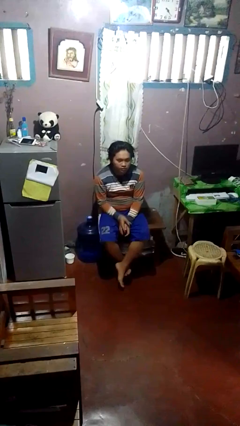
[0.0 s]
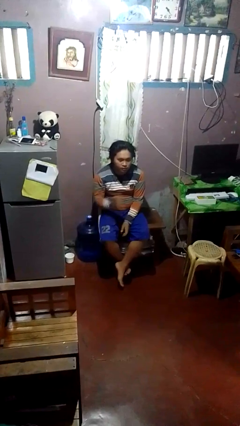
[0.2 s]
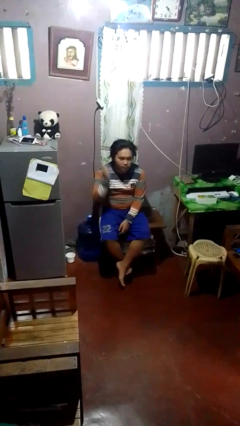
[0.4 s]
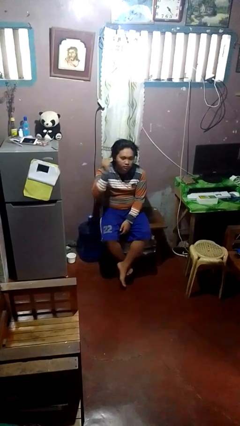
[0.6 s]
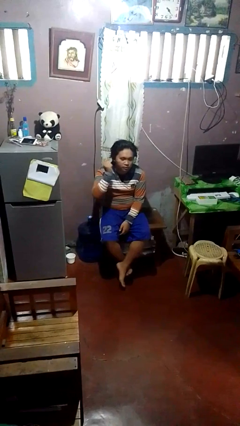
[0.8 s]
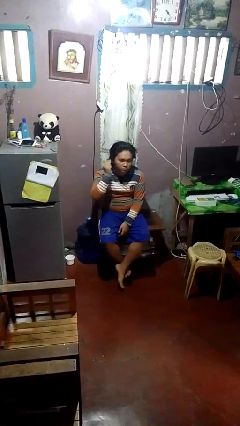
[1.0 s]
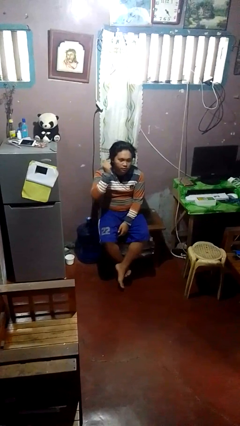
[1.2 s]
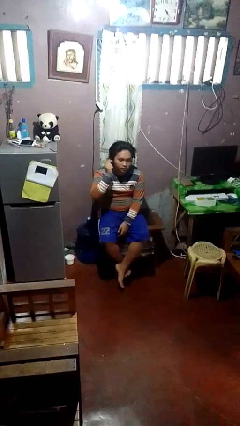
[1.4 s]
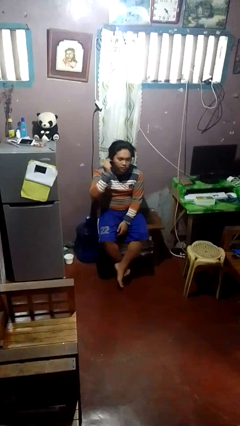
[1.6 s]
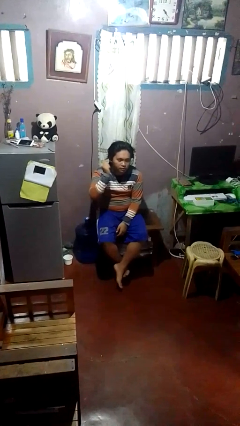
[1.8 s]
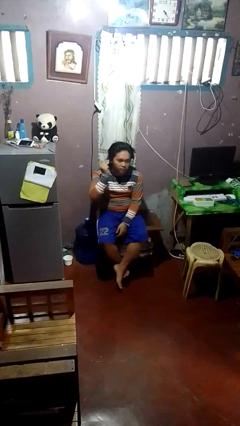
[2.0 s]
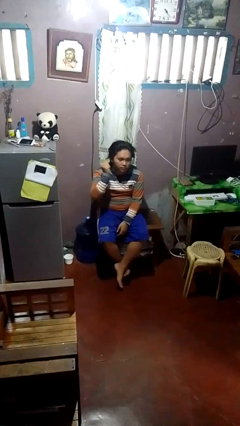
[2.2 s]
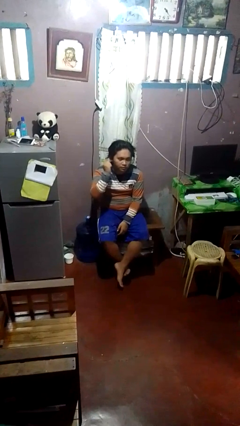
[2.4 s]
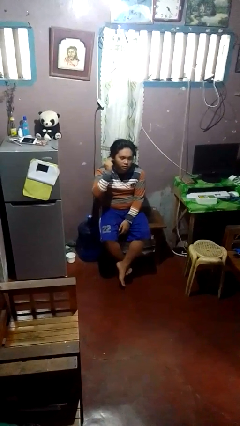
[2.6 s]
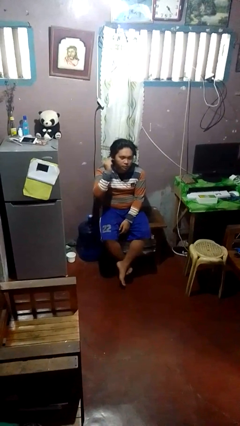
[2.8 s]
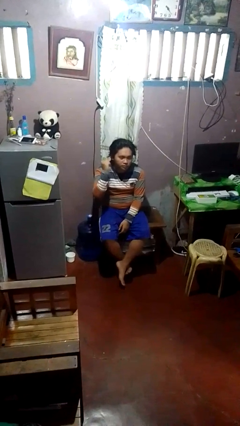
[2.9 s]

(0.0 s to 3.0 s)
person gestures listen closely

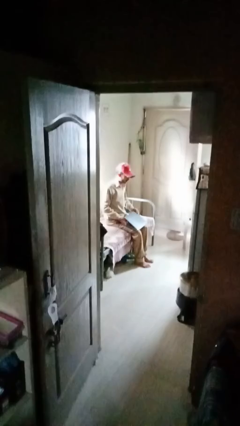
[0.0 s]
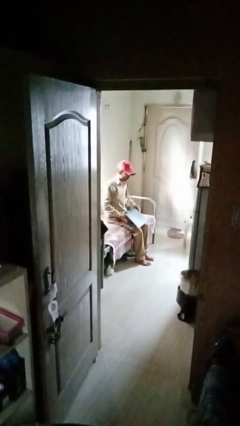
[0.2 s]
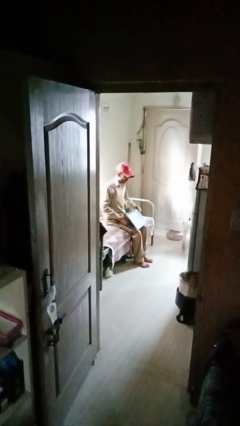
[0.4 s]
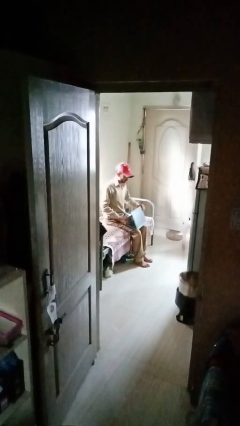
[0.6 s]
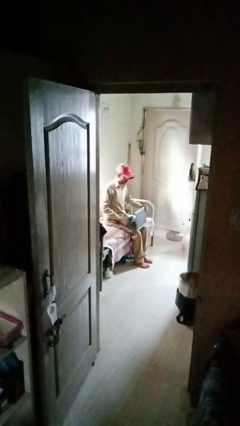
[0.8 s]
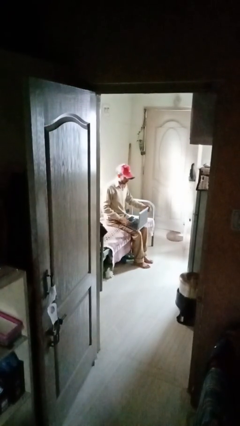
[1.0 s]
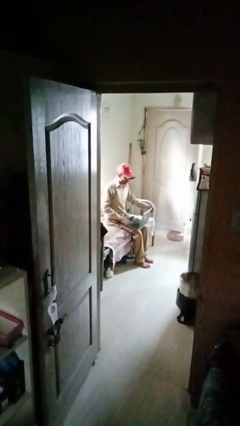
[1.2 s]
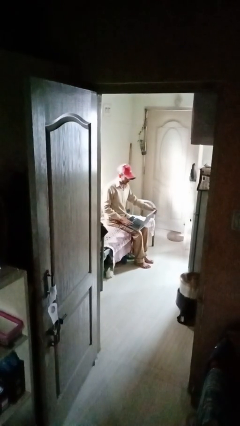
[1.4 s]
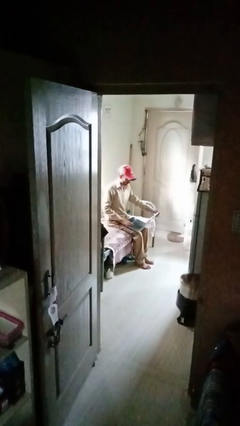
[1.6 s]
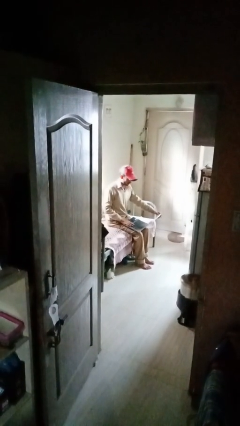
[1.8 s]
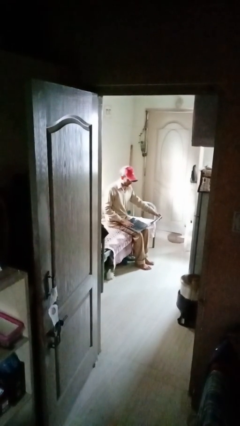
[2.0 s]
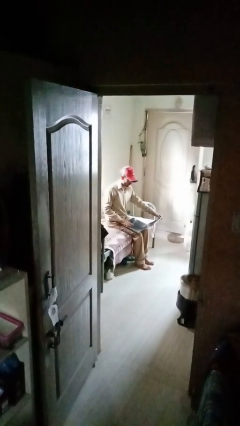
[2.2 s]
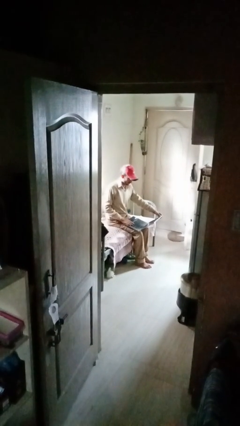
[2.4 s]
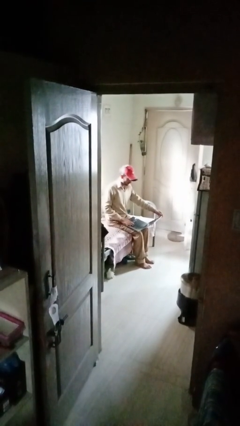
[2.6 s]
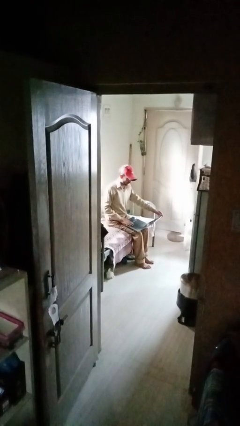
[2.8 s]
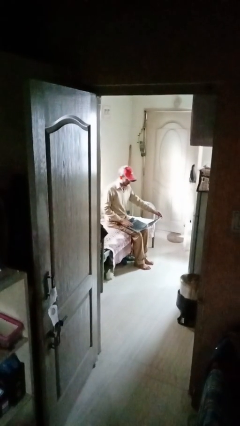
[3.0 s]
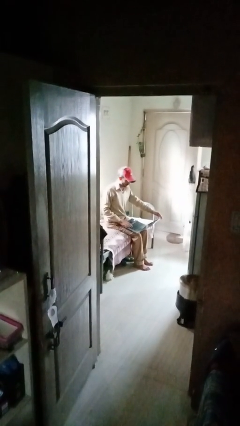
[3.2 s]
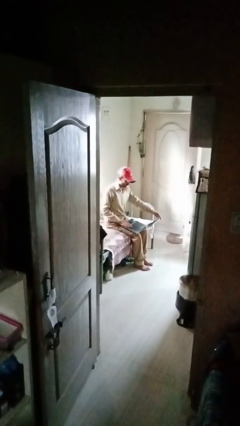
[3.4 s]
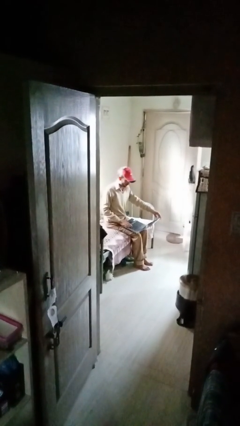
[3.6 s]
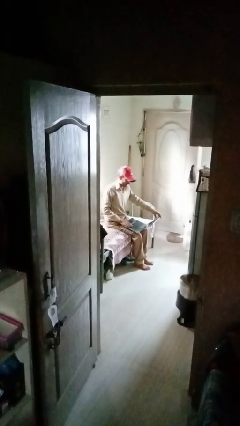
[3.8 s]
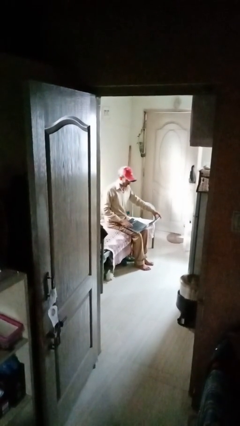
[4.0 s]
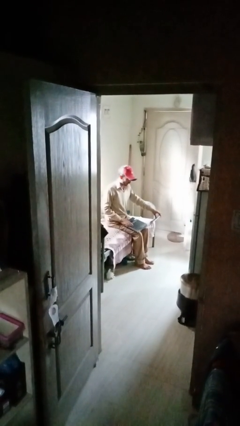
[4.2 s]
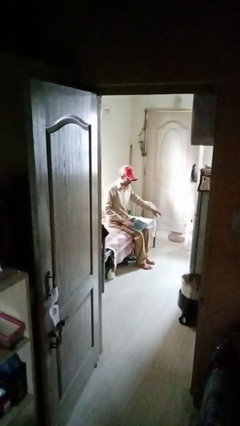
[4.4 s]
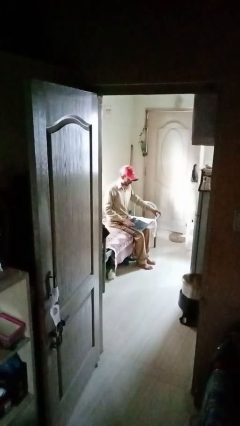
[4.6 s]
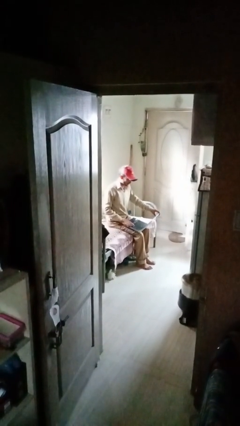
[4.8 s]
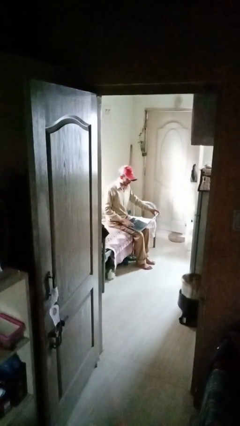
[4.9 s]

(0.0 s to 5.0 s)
person opens laptop

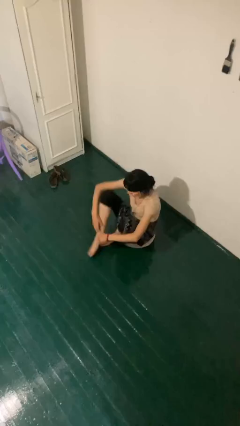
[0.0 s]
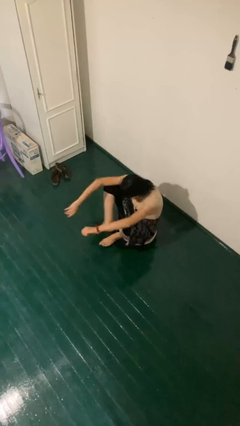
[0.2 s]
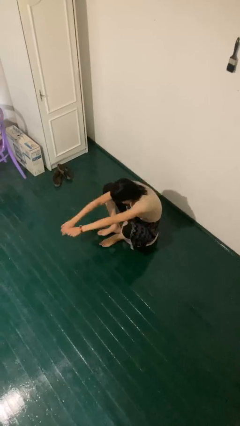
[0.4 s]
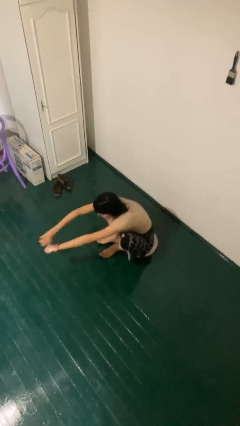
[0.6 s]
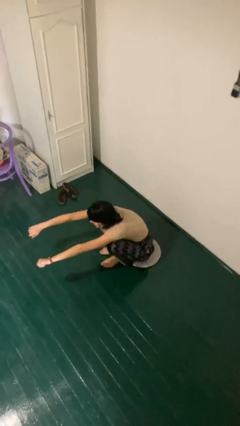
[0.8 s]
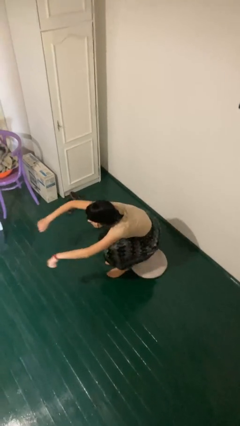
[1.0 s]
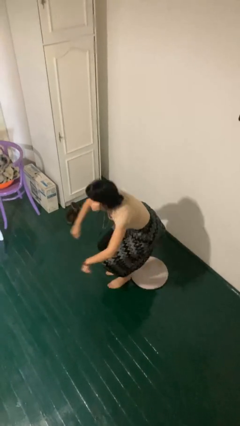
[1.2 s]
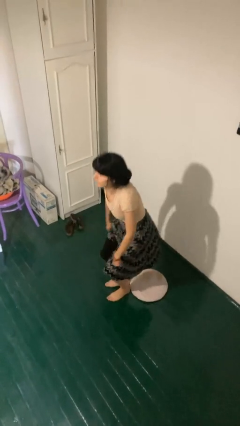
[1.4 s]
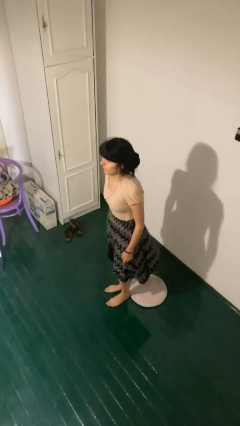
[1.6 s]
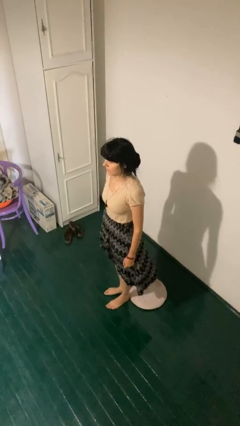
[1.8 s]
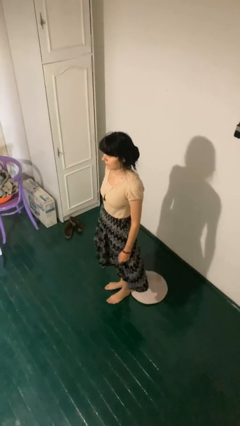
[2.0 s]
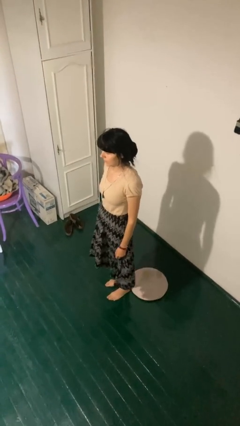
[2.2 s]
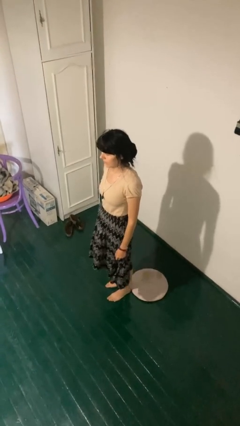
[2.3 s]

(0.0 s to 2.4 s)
person stands up from floor

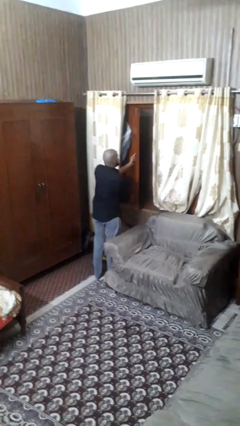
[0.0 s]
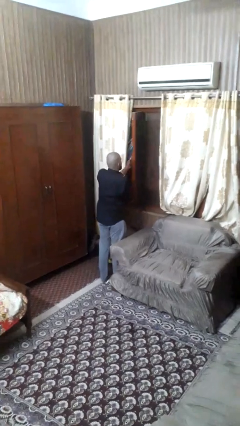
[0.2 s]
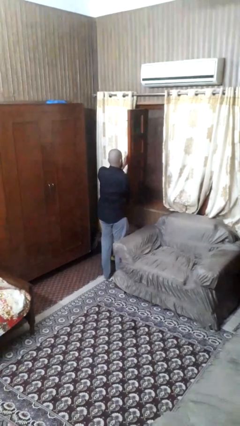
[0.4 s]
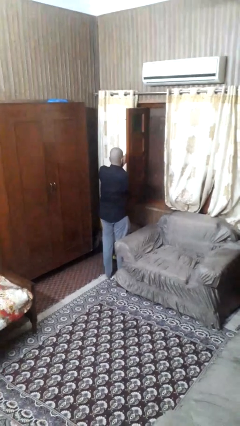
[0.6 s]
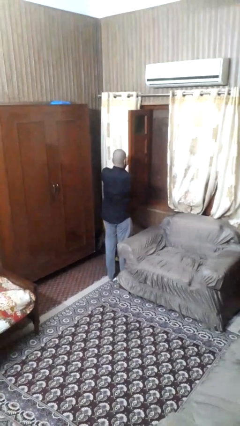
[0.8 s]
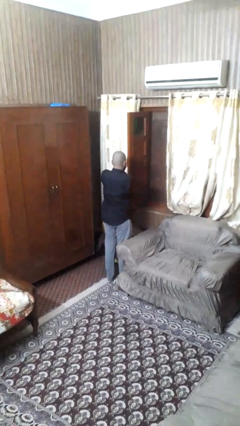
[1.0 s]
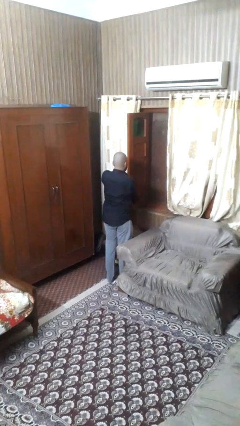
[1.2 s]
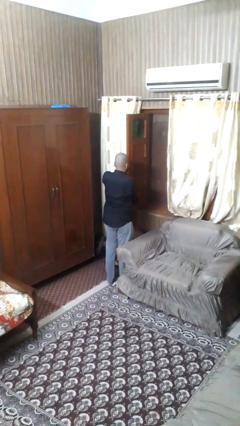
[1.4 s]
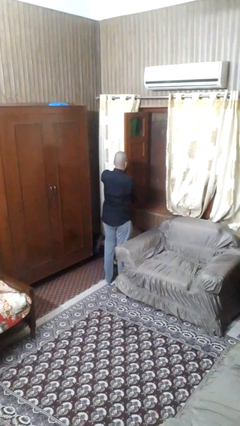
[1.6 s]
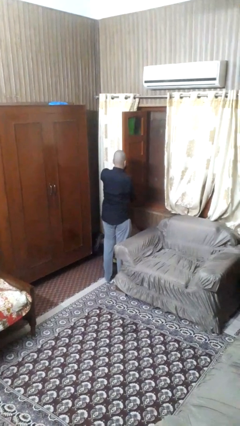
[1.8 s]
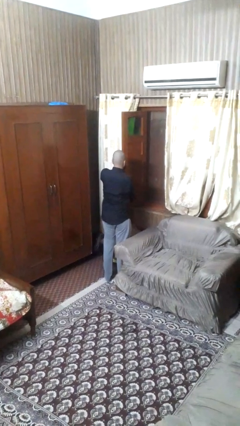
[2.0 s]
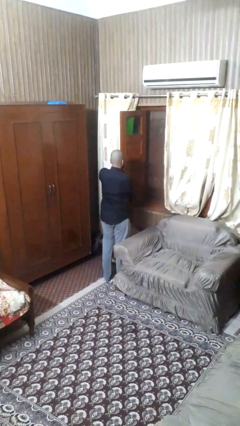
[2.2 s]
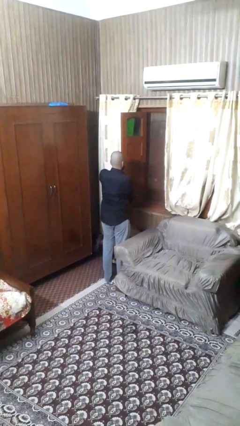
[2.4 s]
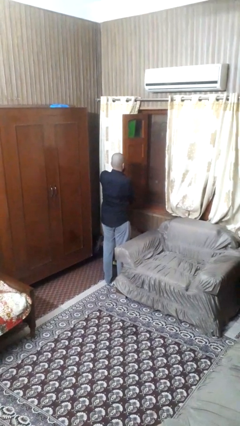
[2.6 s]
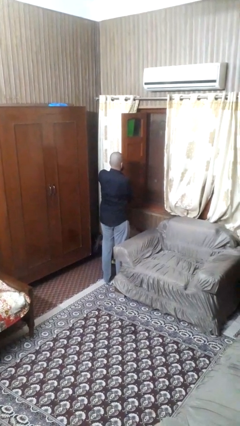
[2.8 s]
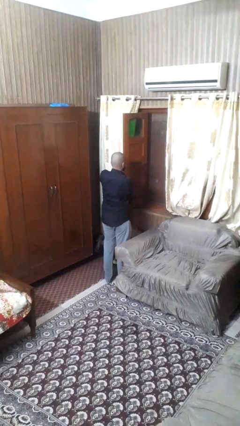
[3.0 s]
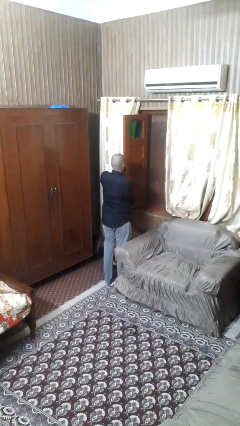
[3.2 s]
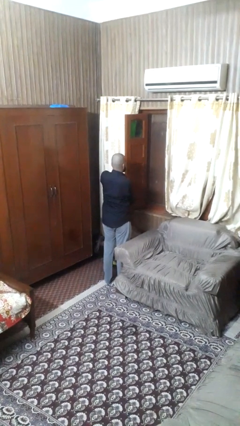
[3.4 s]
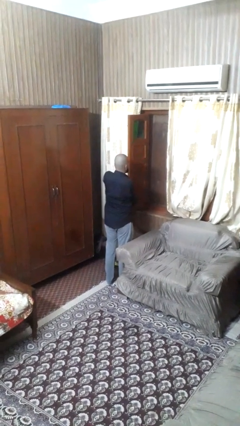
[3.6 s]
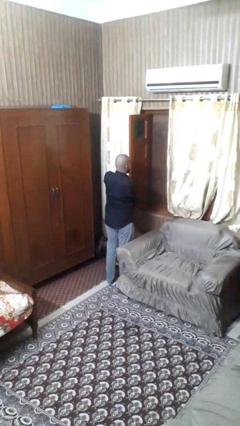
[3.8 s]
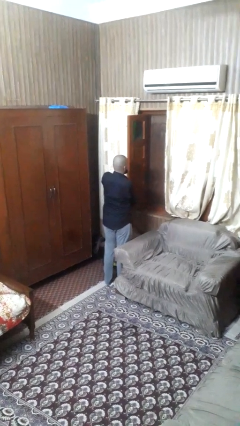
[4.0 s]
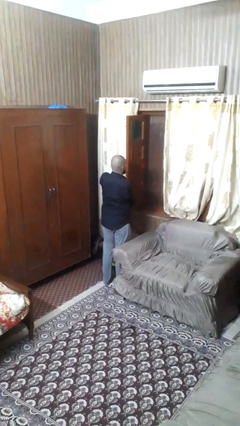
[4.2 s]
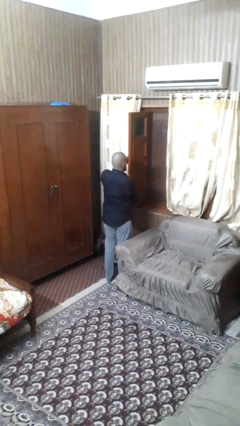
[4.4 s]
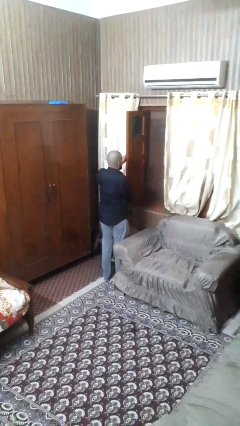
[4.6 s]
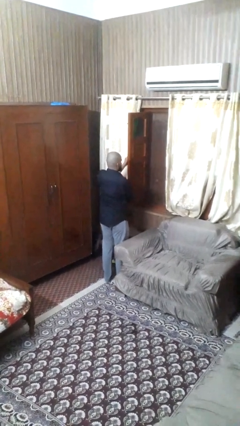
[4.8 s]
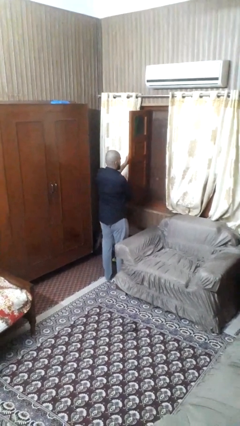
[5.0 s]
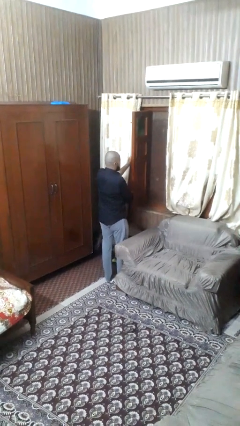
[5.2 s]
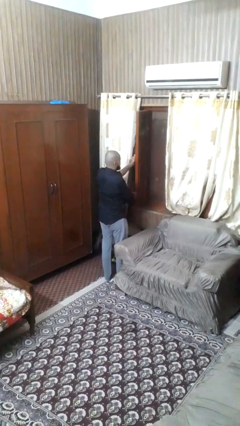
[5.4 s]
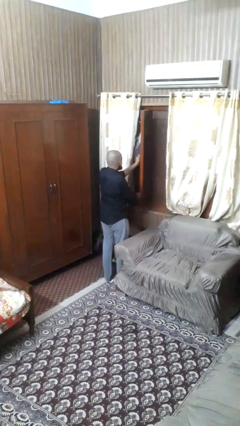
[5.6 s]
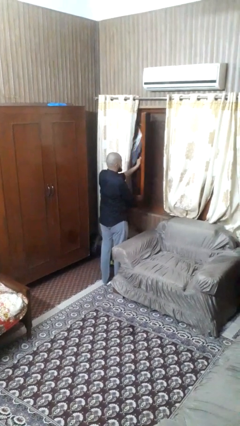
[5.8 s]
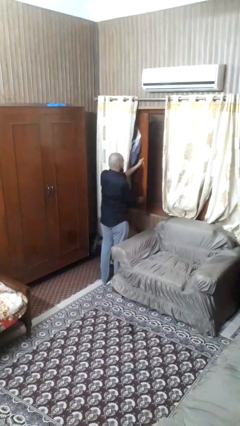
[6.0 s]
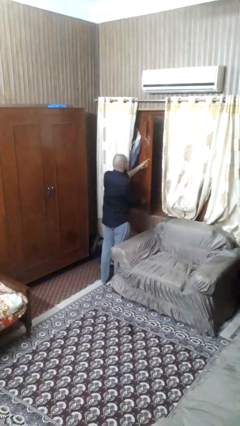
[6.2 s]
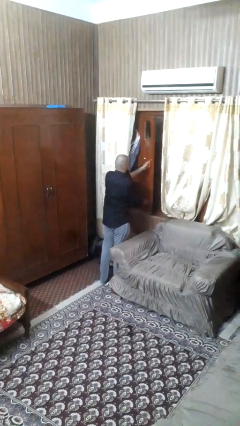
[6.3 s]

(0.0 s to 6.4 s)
person opens home window

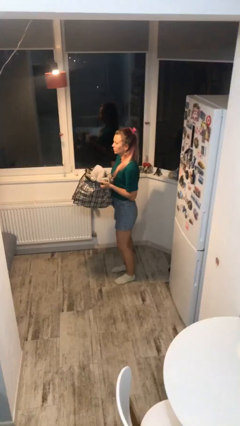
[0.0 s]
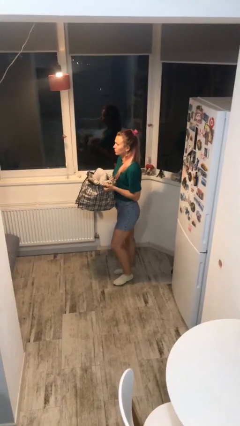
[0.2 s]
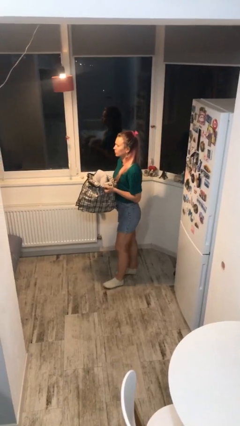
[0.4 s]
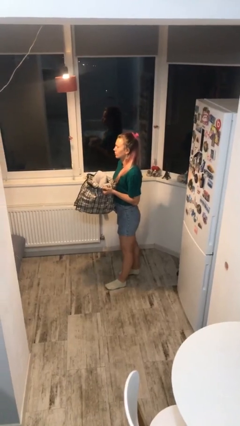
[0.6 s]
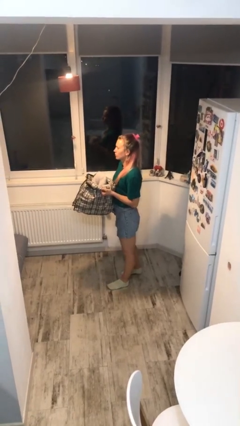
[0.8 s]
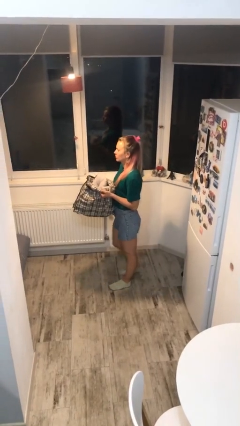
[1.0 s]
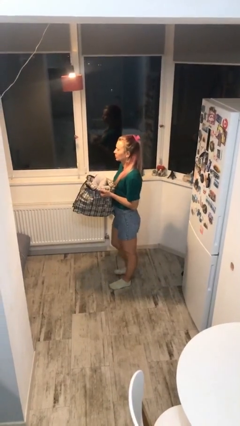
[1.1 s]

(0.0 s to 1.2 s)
person carries laundry basket
